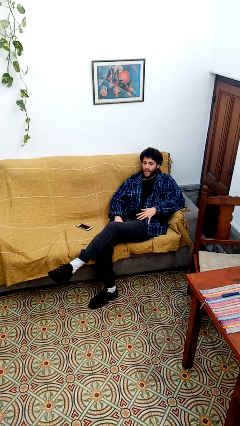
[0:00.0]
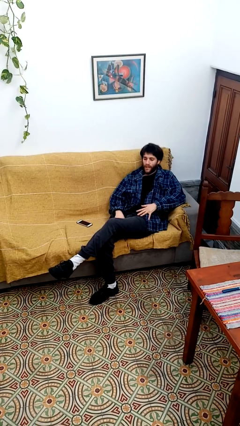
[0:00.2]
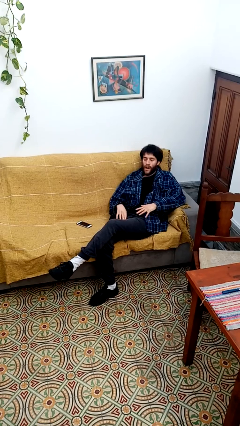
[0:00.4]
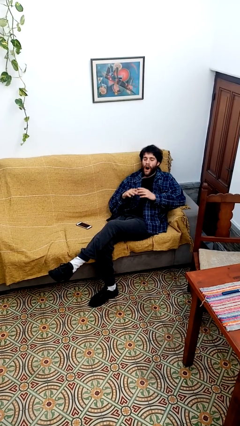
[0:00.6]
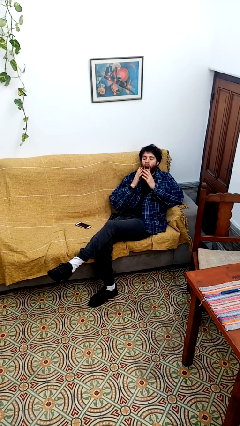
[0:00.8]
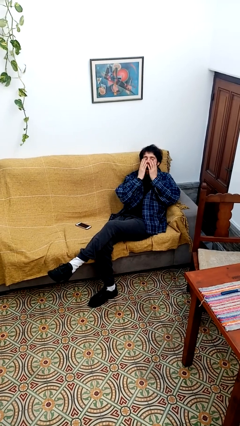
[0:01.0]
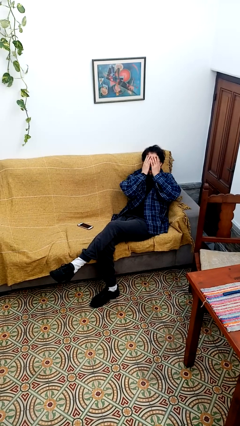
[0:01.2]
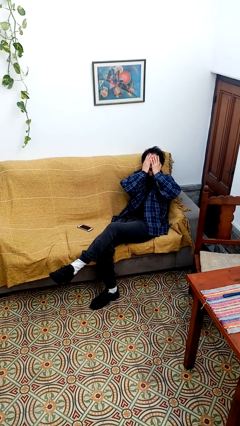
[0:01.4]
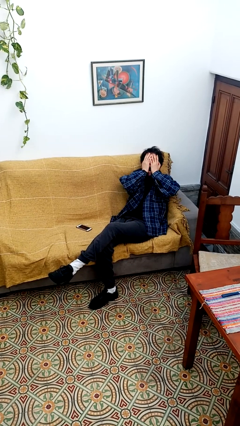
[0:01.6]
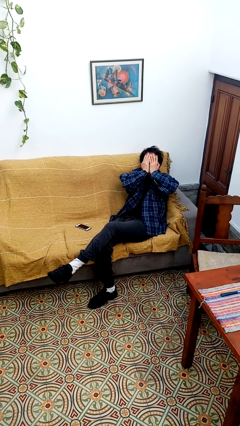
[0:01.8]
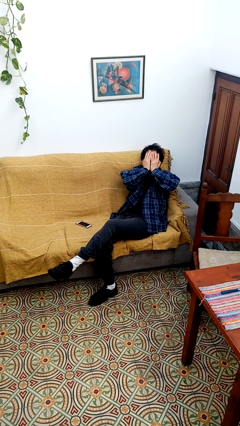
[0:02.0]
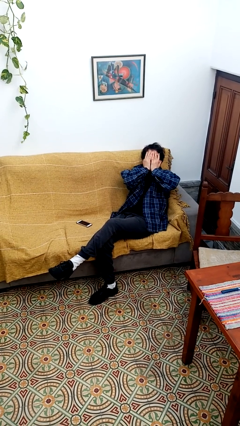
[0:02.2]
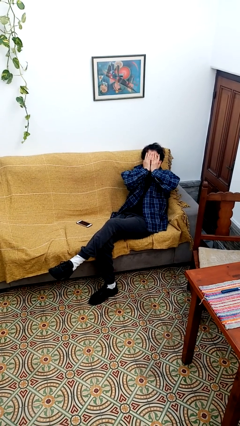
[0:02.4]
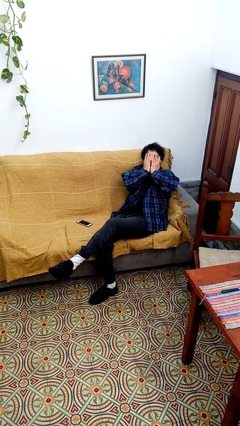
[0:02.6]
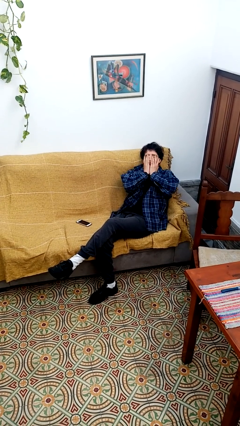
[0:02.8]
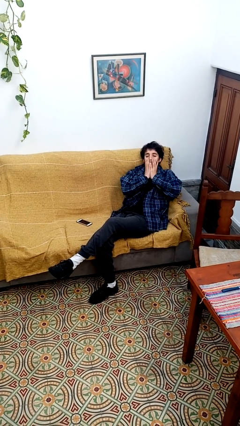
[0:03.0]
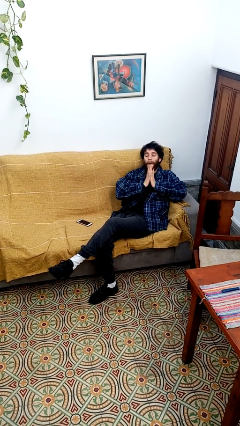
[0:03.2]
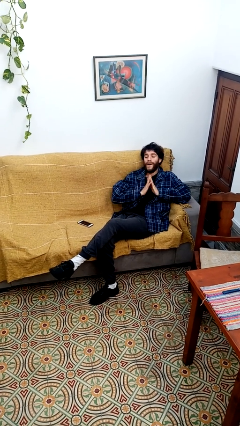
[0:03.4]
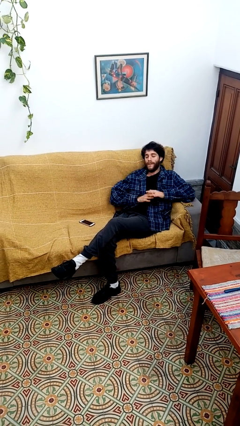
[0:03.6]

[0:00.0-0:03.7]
person yawns

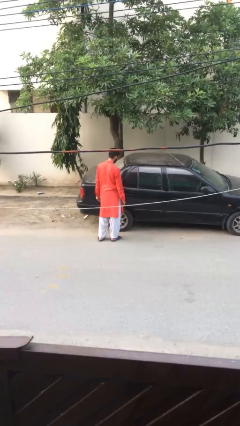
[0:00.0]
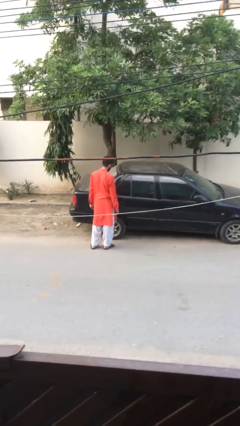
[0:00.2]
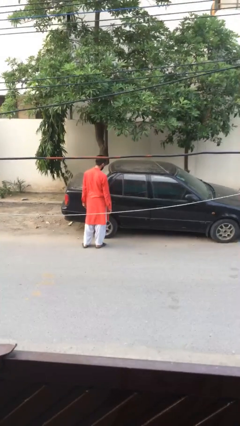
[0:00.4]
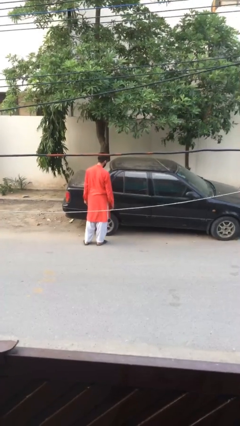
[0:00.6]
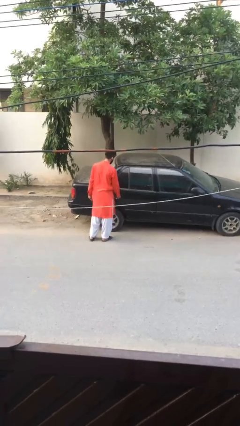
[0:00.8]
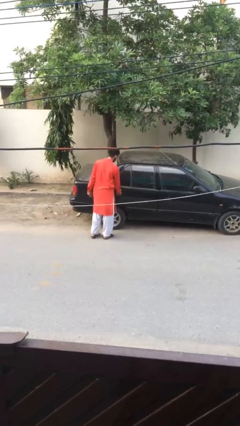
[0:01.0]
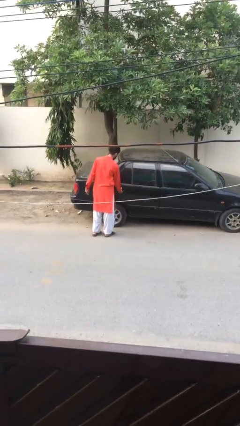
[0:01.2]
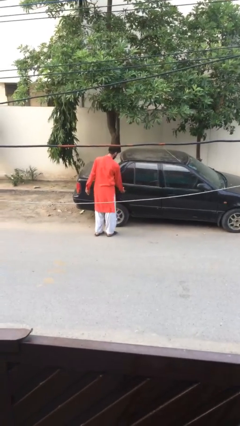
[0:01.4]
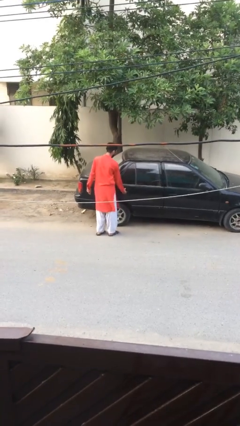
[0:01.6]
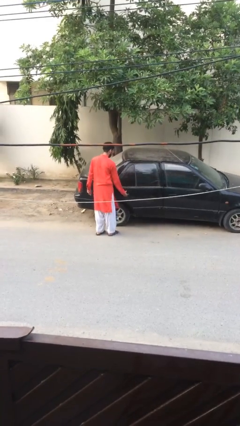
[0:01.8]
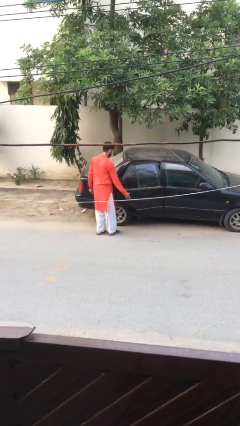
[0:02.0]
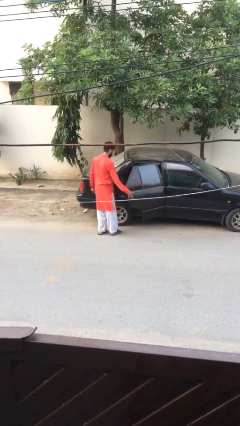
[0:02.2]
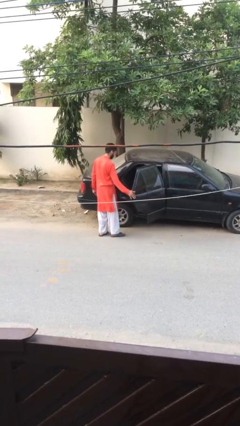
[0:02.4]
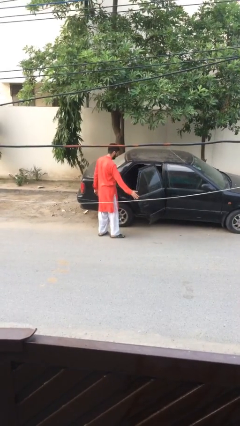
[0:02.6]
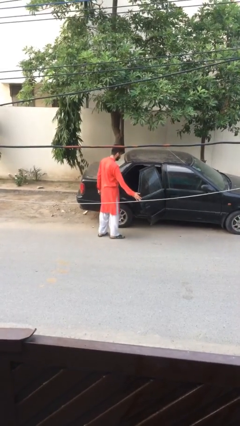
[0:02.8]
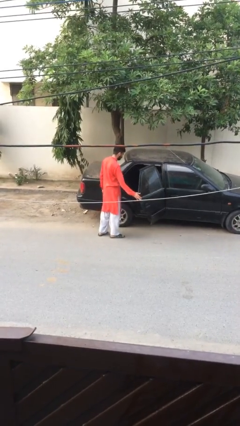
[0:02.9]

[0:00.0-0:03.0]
person opens car door

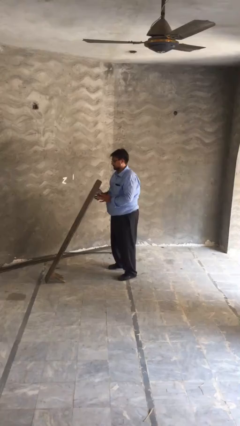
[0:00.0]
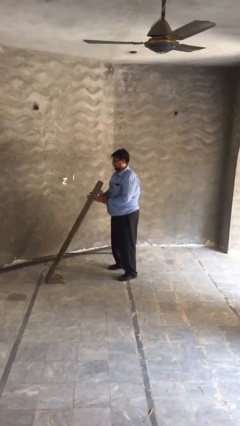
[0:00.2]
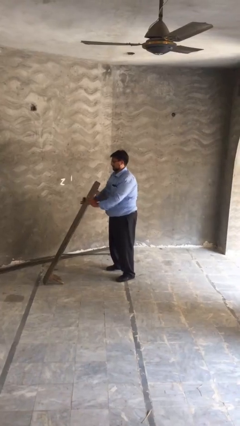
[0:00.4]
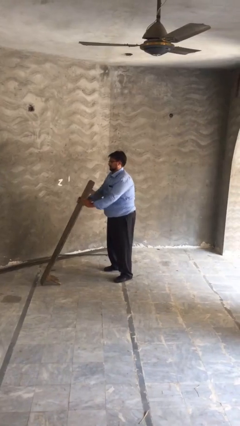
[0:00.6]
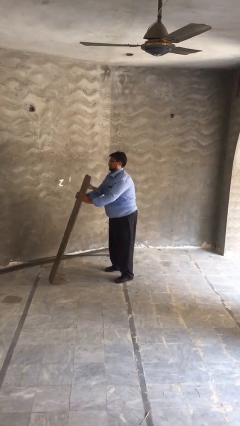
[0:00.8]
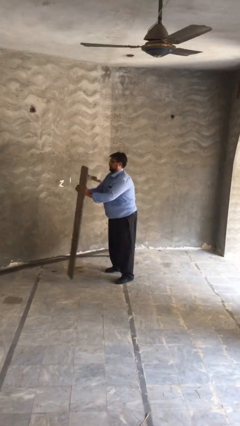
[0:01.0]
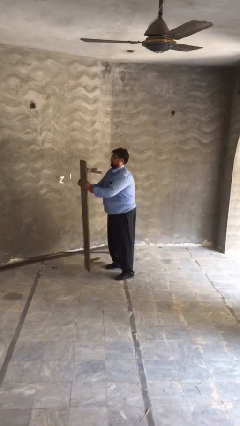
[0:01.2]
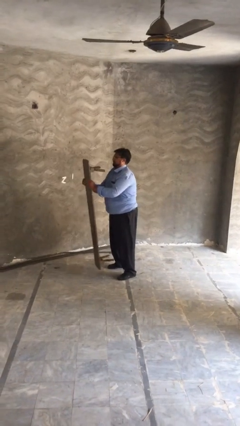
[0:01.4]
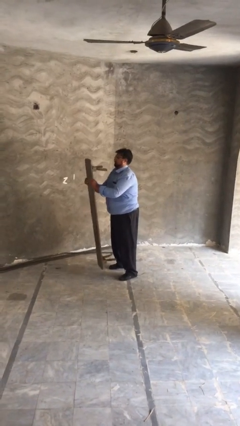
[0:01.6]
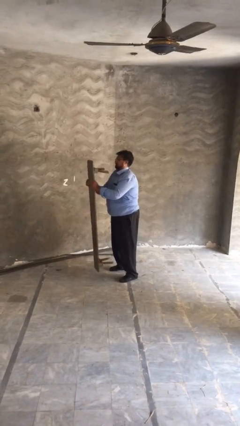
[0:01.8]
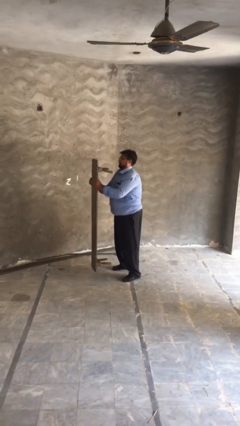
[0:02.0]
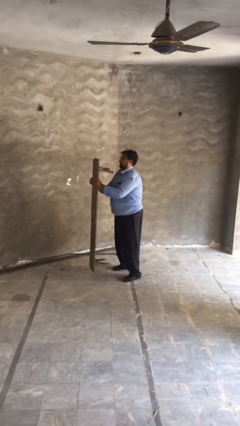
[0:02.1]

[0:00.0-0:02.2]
person picks up object from floor

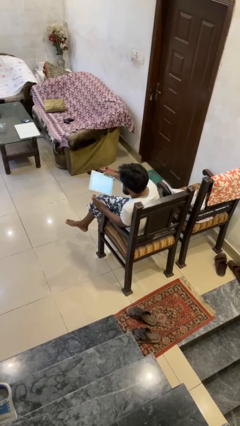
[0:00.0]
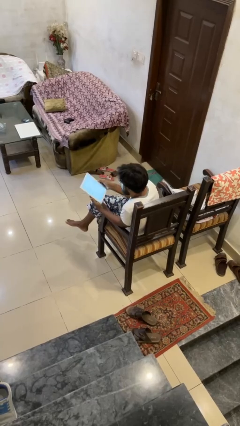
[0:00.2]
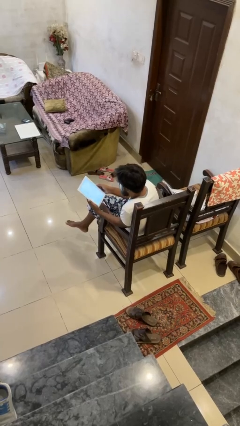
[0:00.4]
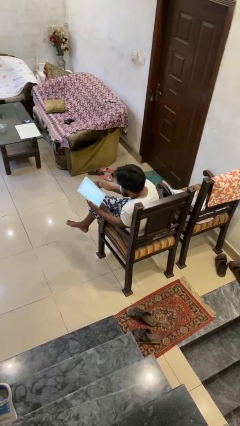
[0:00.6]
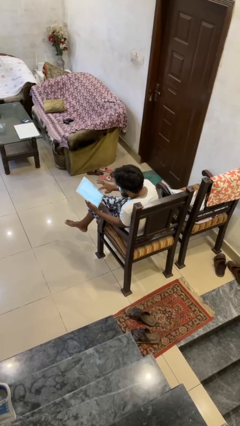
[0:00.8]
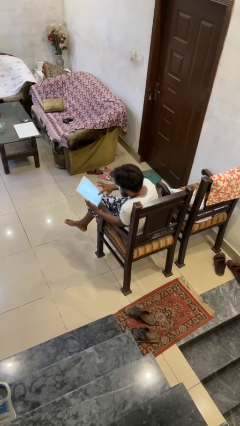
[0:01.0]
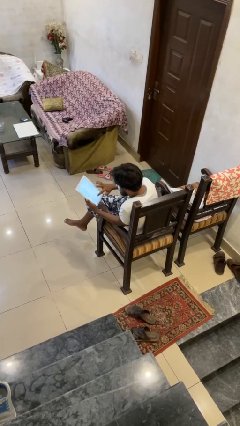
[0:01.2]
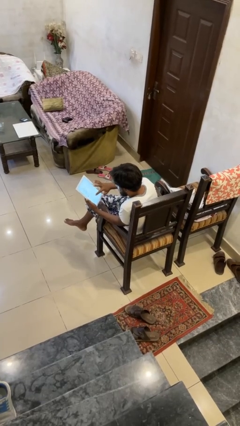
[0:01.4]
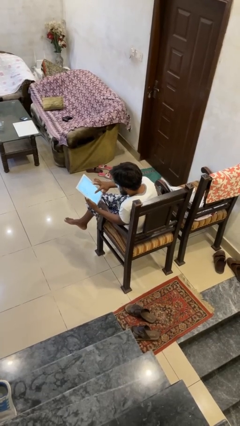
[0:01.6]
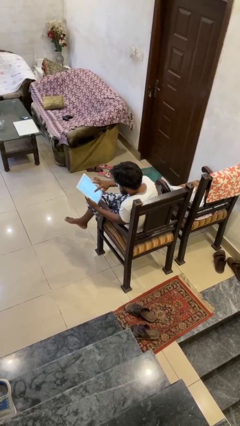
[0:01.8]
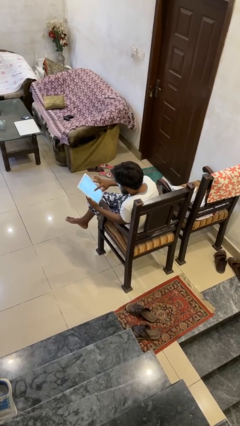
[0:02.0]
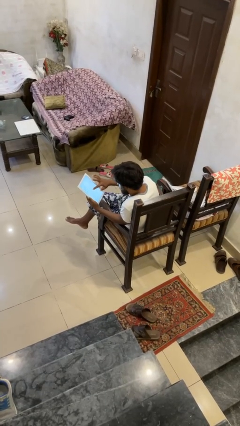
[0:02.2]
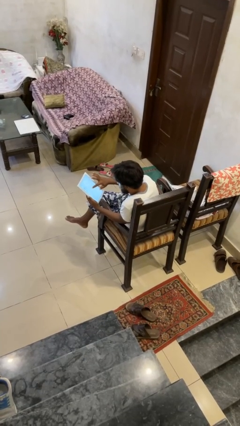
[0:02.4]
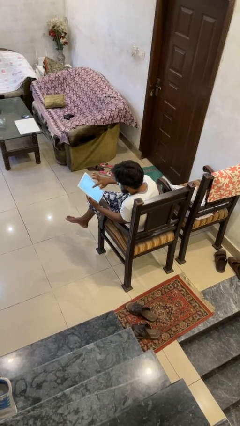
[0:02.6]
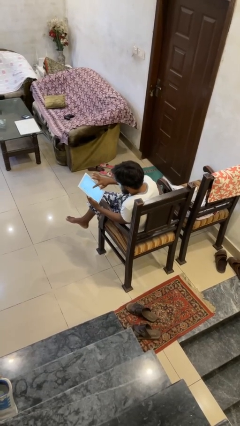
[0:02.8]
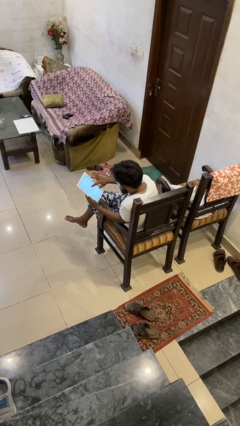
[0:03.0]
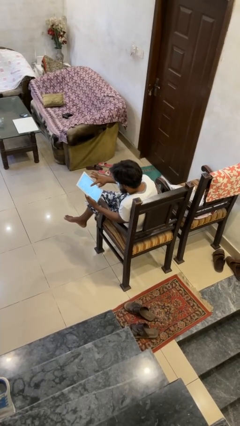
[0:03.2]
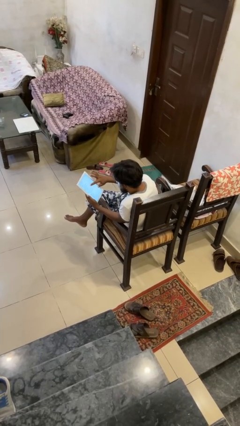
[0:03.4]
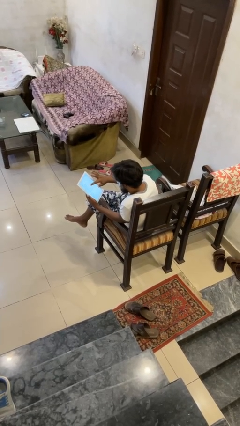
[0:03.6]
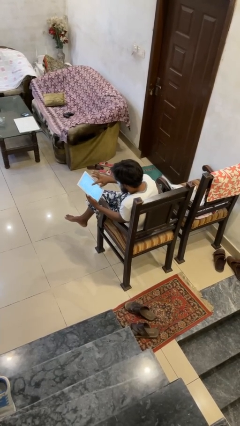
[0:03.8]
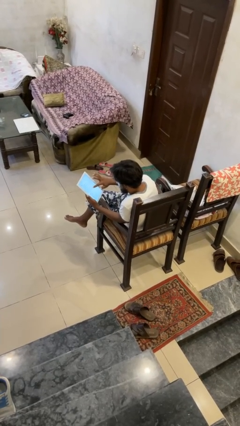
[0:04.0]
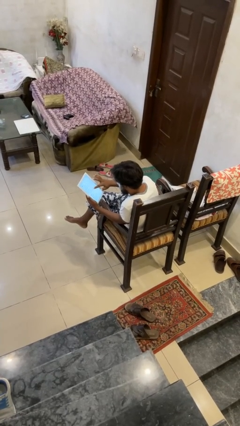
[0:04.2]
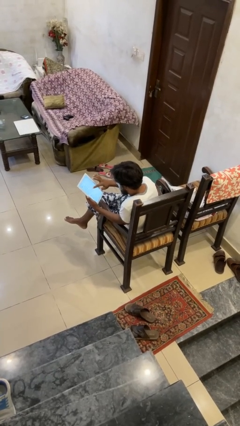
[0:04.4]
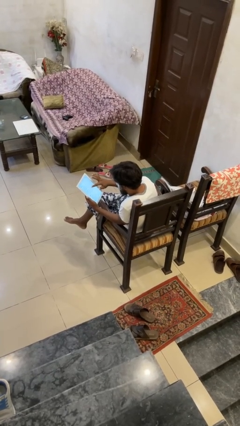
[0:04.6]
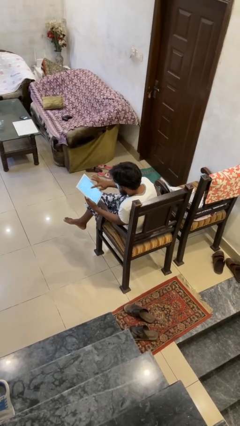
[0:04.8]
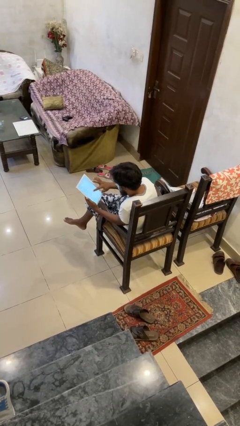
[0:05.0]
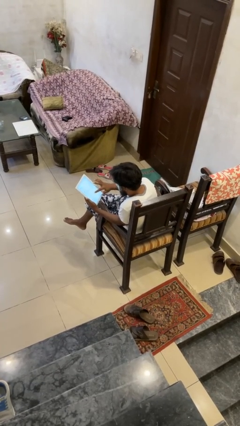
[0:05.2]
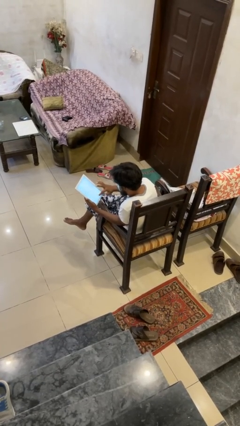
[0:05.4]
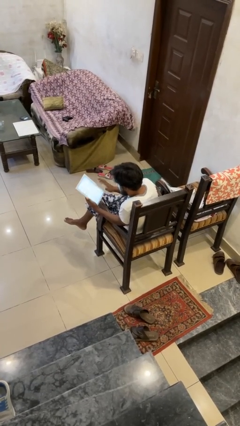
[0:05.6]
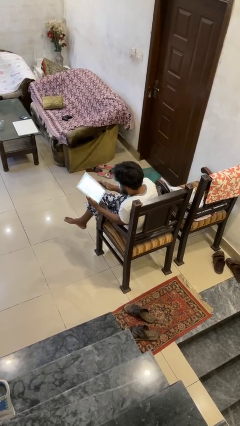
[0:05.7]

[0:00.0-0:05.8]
person interacts with tablet

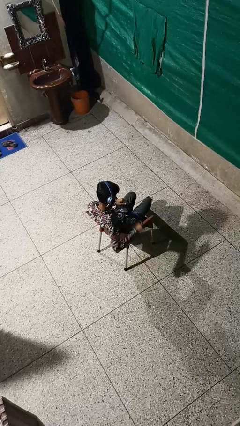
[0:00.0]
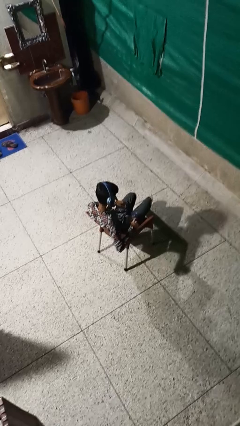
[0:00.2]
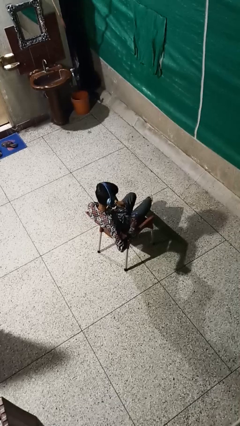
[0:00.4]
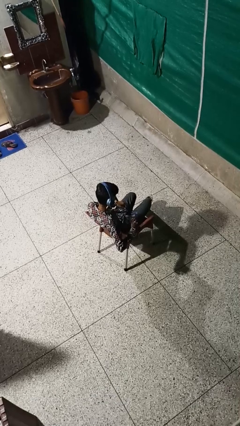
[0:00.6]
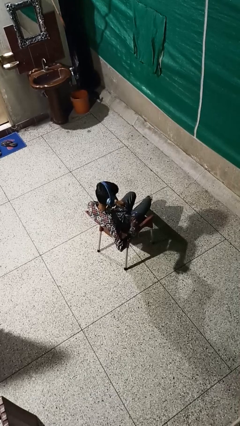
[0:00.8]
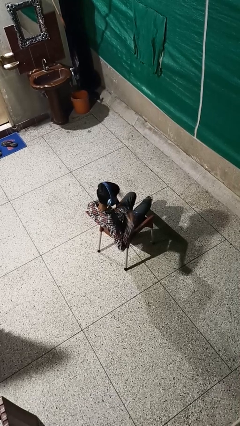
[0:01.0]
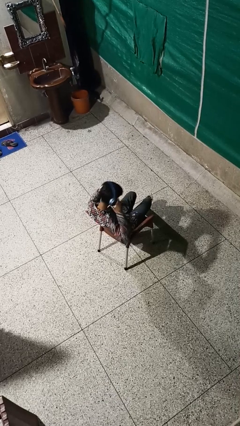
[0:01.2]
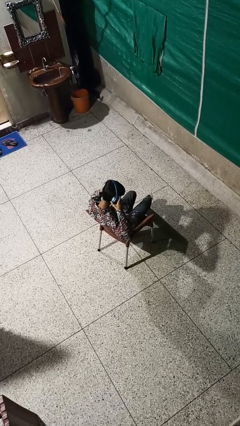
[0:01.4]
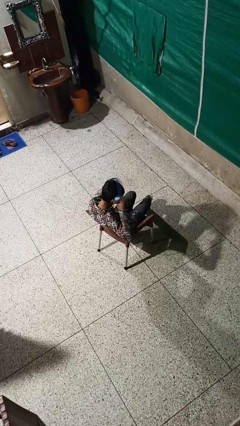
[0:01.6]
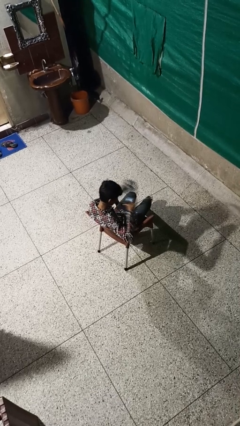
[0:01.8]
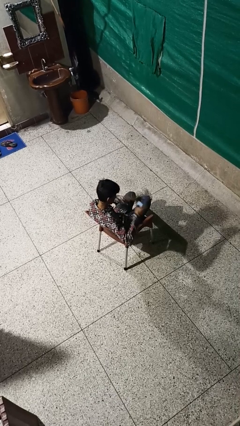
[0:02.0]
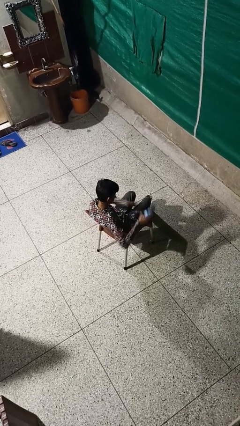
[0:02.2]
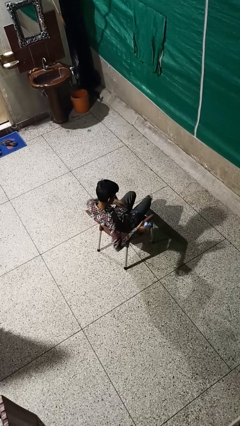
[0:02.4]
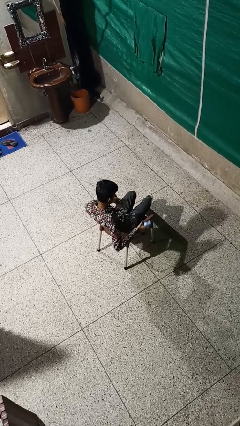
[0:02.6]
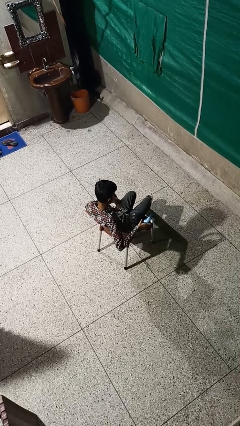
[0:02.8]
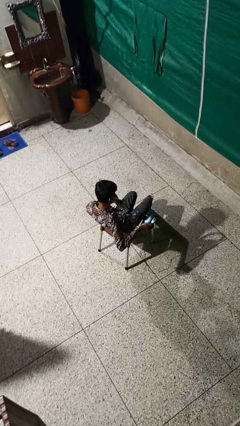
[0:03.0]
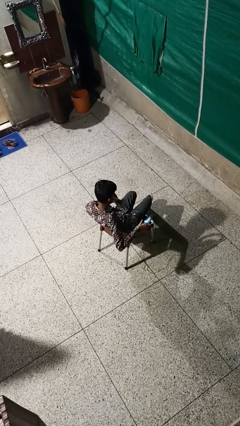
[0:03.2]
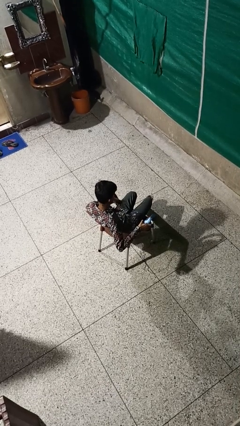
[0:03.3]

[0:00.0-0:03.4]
person takes off headphones
